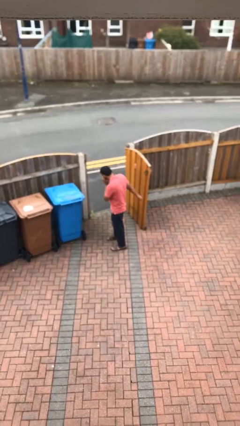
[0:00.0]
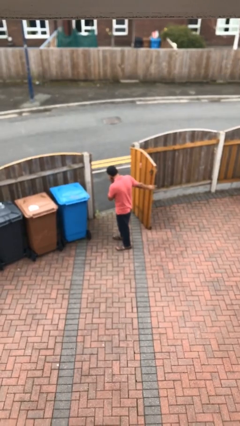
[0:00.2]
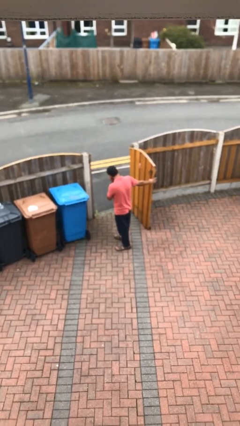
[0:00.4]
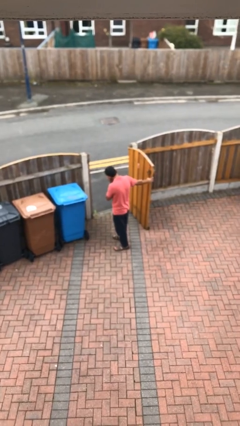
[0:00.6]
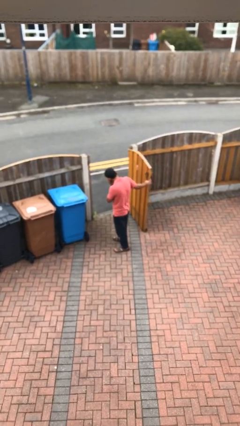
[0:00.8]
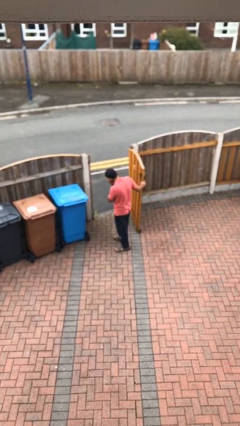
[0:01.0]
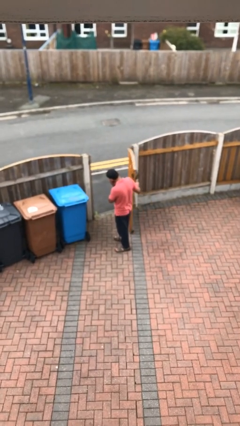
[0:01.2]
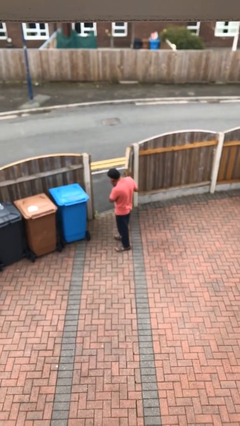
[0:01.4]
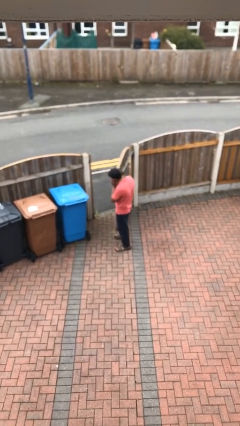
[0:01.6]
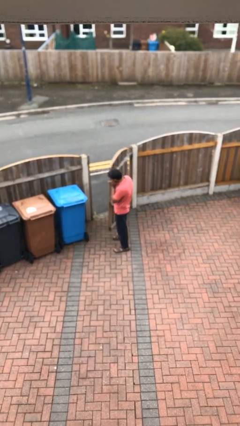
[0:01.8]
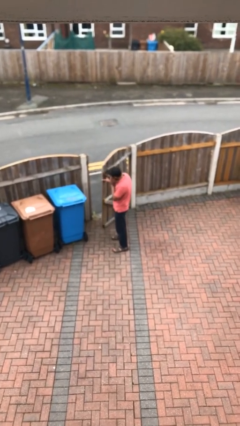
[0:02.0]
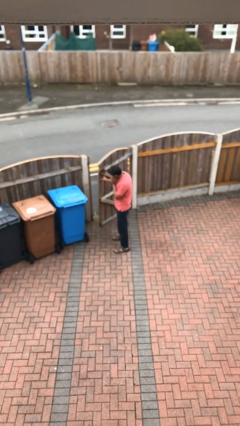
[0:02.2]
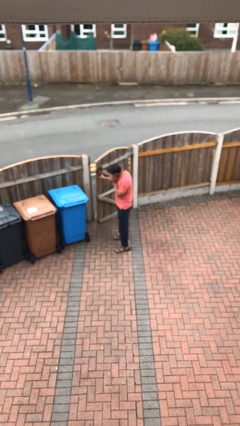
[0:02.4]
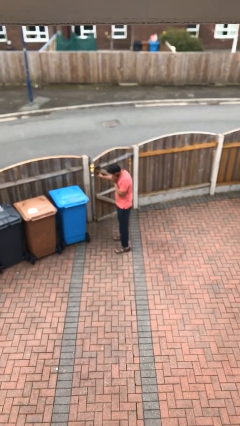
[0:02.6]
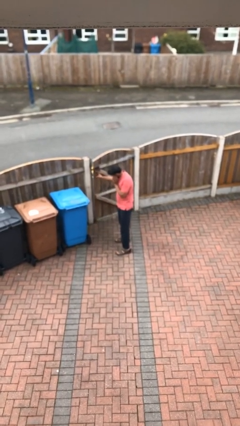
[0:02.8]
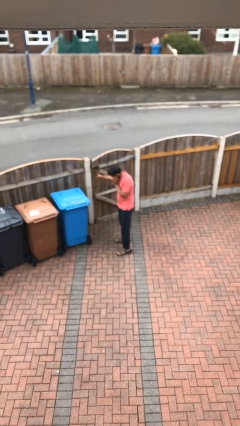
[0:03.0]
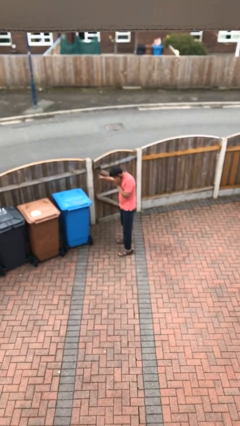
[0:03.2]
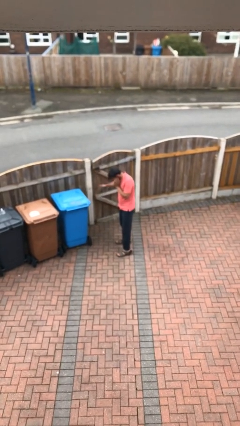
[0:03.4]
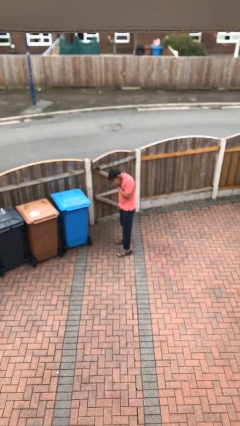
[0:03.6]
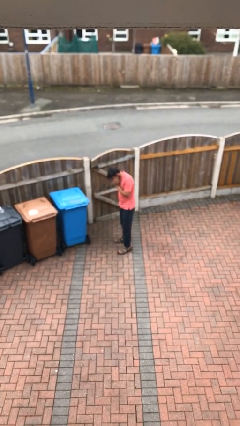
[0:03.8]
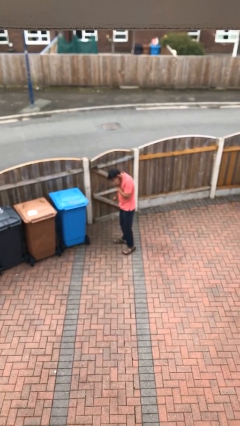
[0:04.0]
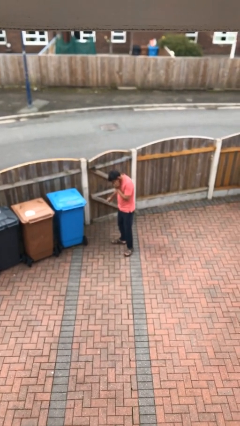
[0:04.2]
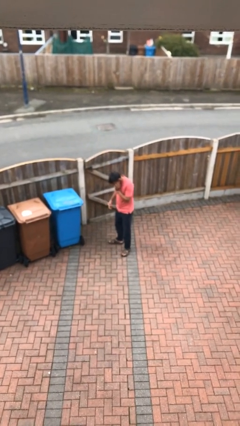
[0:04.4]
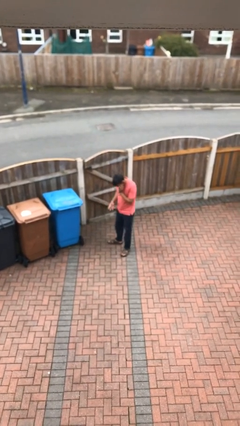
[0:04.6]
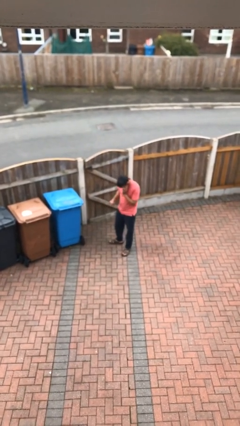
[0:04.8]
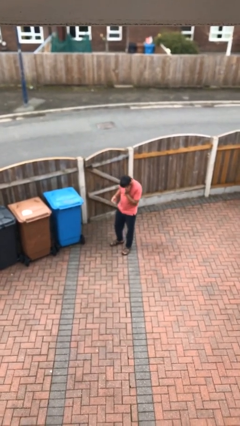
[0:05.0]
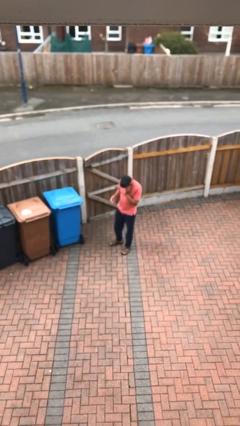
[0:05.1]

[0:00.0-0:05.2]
person closes facility door

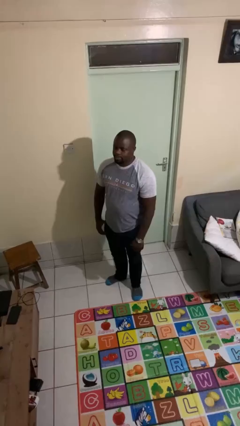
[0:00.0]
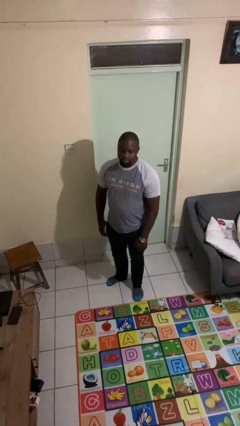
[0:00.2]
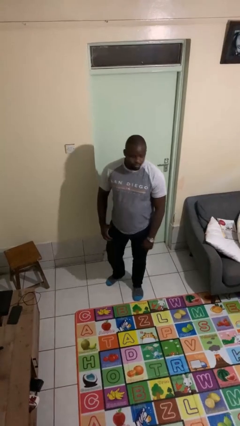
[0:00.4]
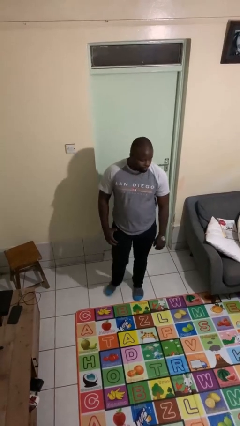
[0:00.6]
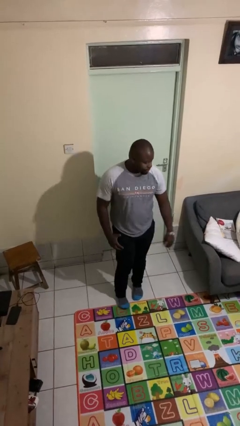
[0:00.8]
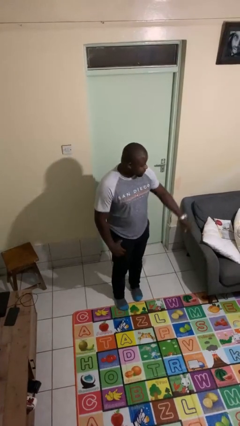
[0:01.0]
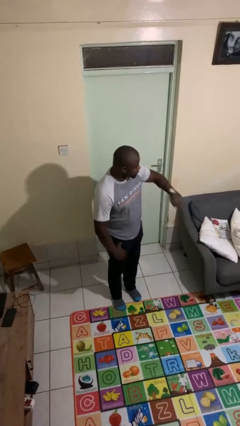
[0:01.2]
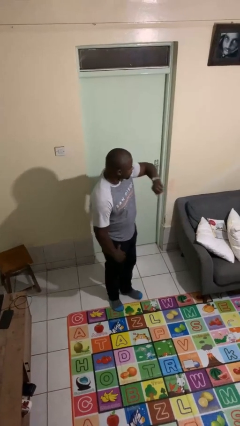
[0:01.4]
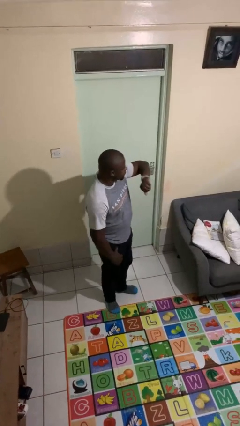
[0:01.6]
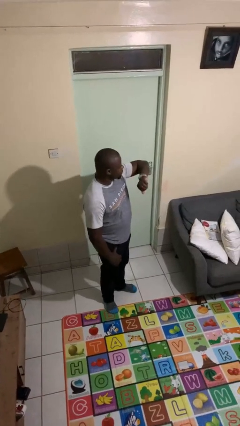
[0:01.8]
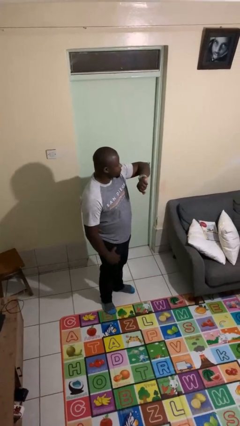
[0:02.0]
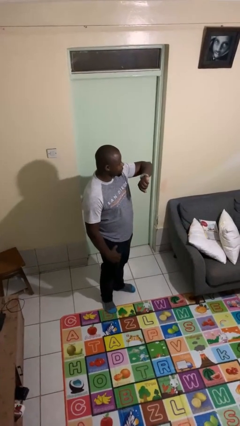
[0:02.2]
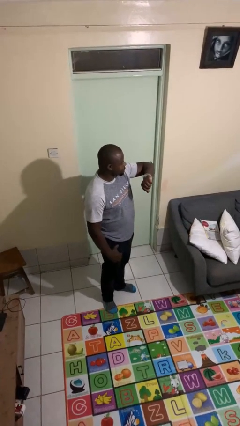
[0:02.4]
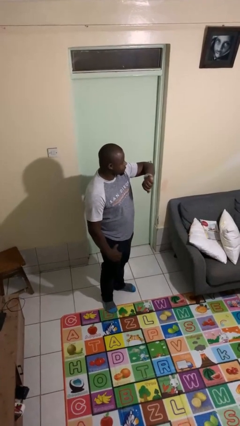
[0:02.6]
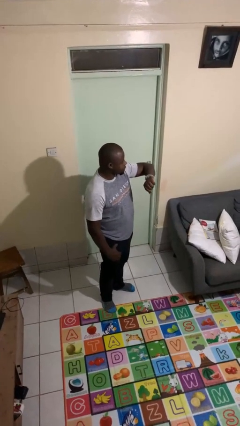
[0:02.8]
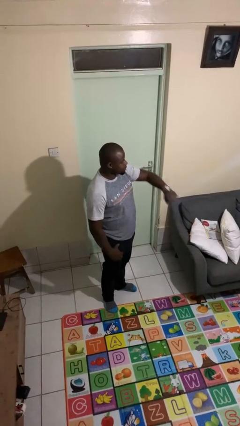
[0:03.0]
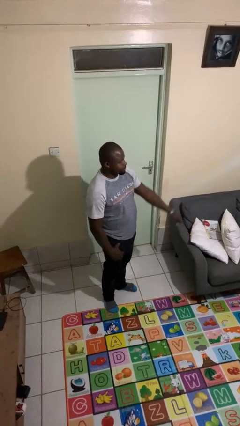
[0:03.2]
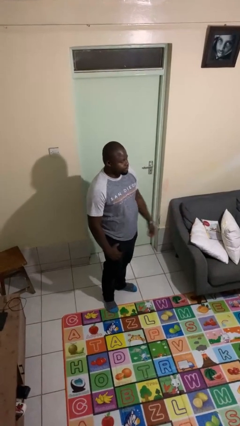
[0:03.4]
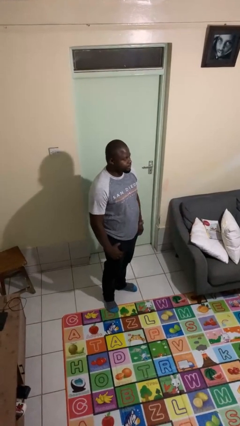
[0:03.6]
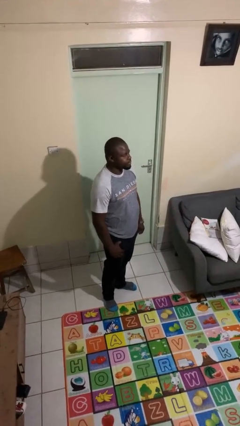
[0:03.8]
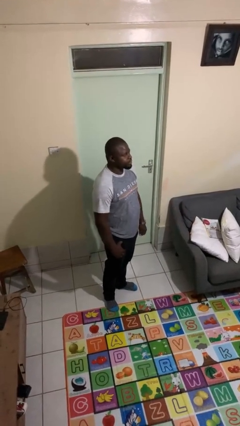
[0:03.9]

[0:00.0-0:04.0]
person looks at wristwatch

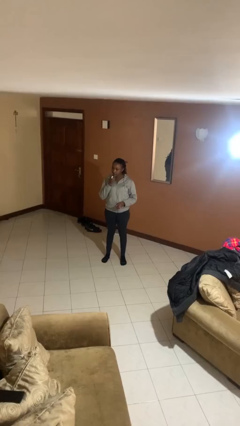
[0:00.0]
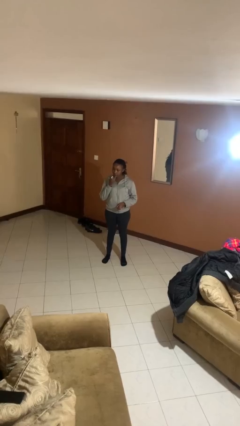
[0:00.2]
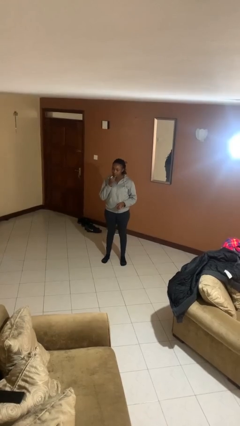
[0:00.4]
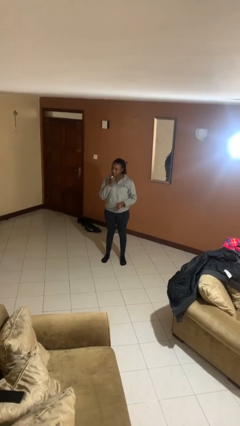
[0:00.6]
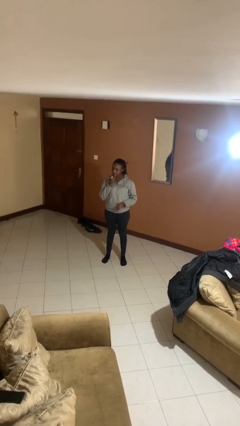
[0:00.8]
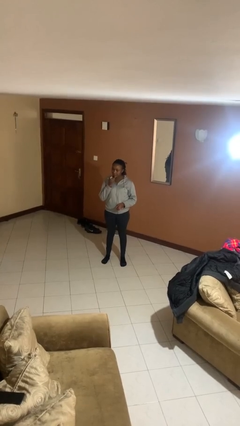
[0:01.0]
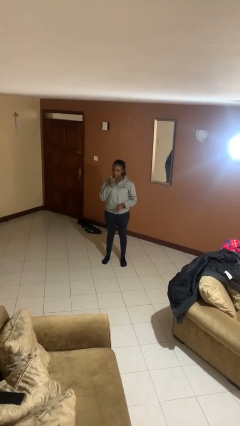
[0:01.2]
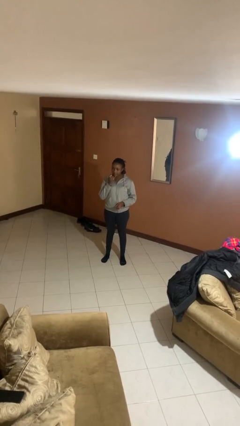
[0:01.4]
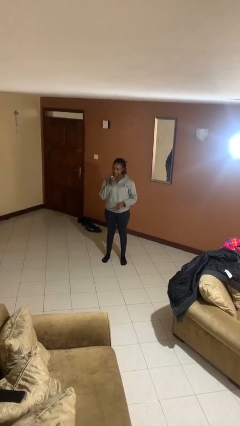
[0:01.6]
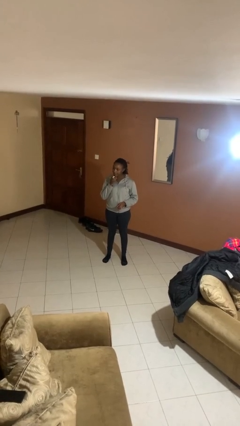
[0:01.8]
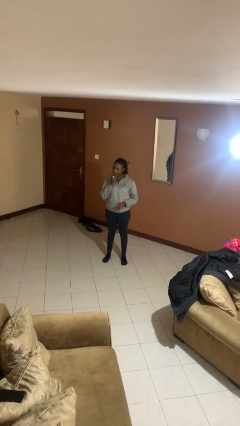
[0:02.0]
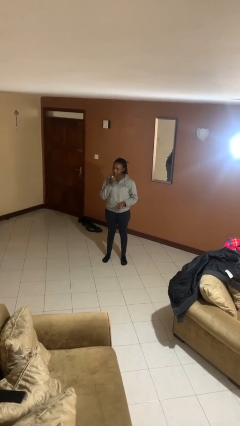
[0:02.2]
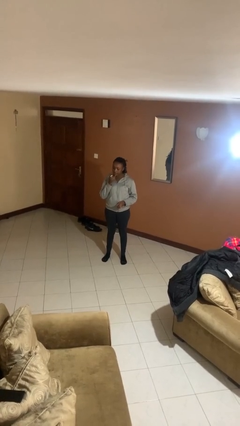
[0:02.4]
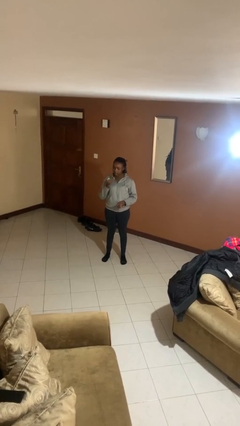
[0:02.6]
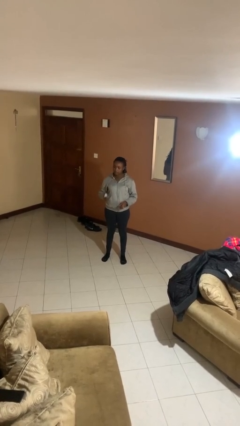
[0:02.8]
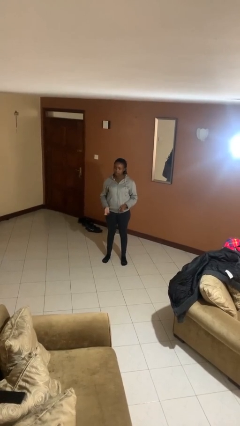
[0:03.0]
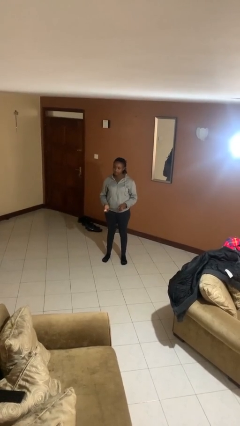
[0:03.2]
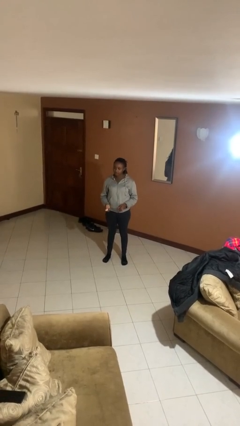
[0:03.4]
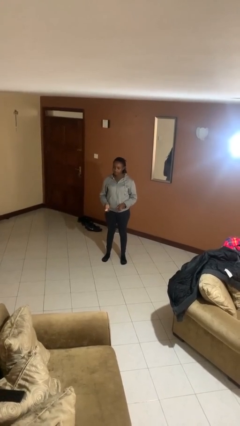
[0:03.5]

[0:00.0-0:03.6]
person applies lip makeup

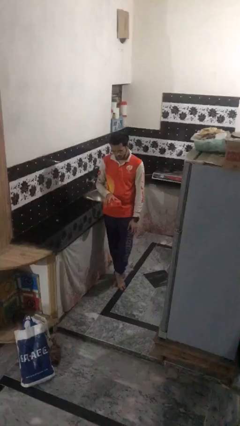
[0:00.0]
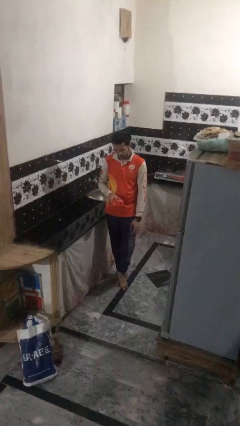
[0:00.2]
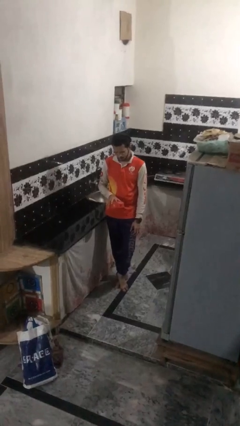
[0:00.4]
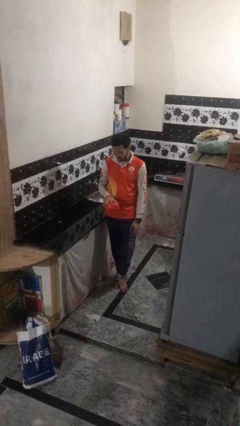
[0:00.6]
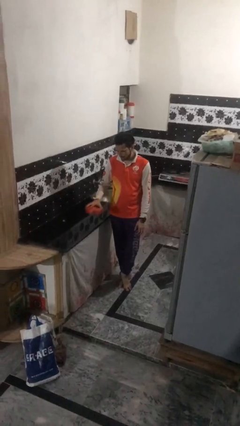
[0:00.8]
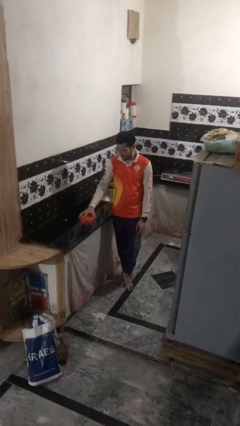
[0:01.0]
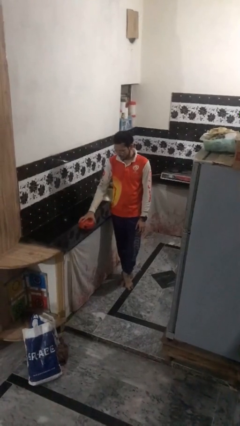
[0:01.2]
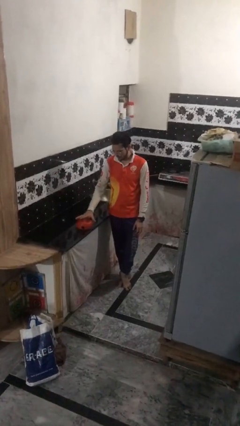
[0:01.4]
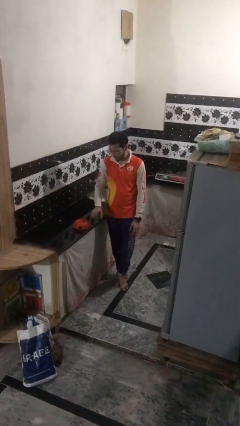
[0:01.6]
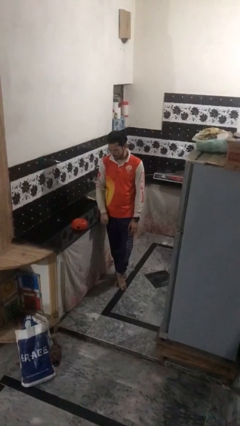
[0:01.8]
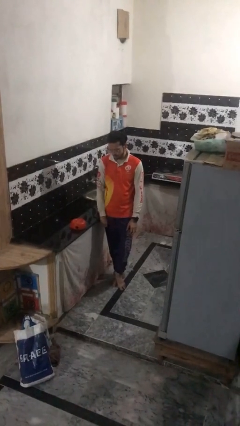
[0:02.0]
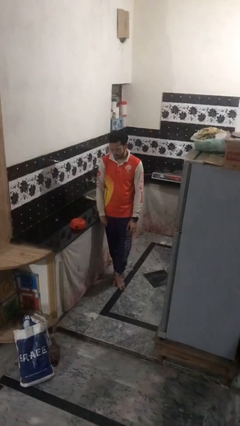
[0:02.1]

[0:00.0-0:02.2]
person puts down object on countertop

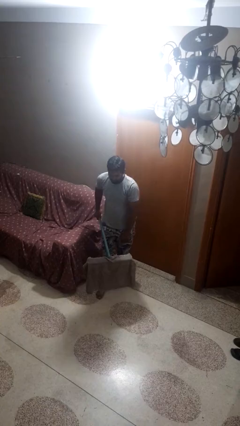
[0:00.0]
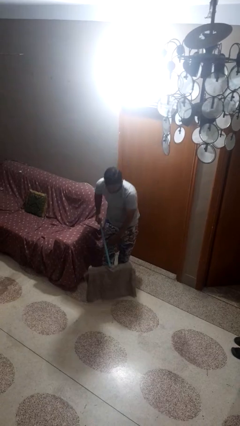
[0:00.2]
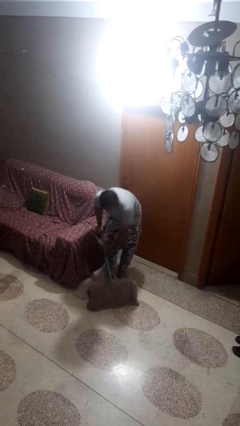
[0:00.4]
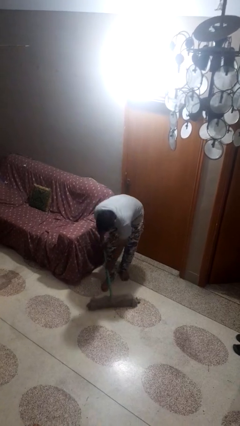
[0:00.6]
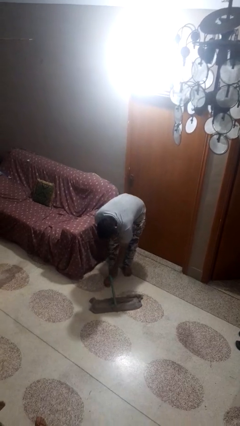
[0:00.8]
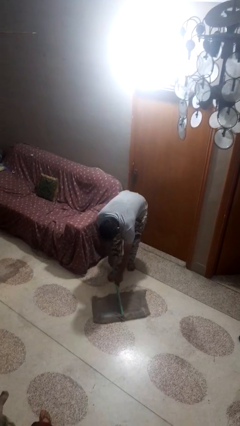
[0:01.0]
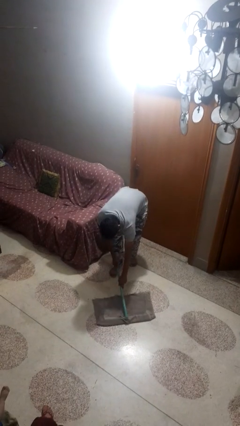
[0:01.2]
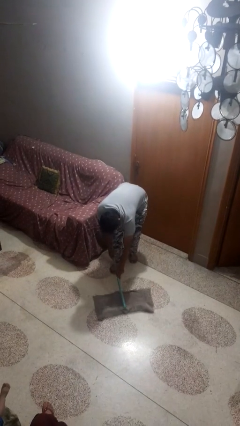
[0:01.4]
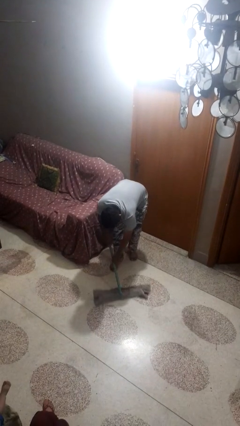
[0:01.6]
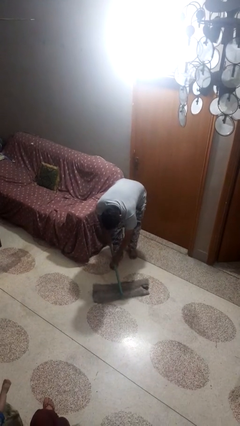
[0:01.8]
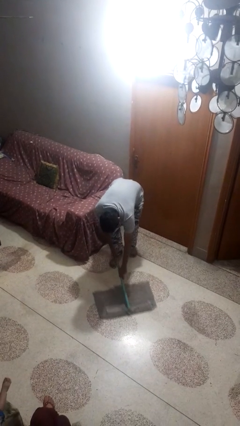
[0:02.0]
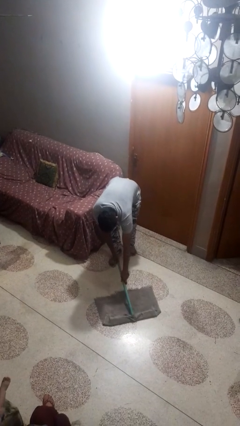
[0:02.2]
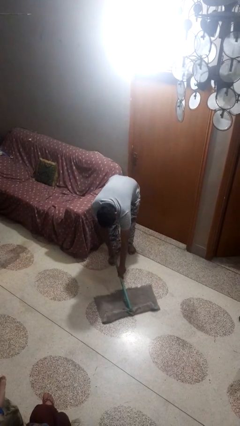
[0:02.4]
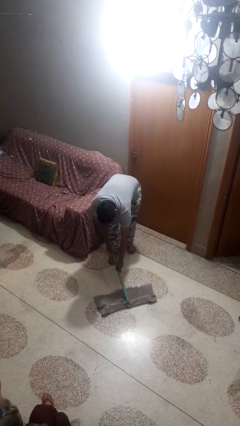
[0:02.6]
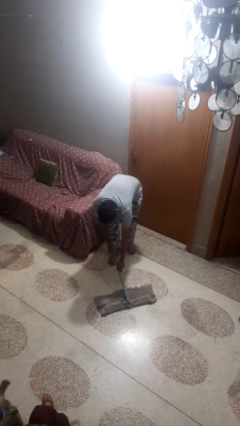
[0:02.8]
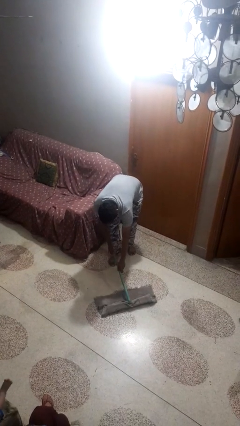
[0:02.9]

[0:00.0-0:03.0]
person mops

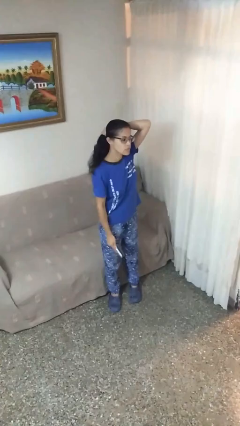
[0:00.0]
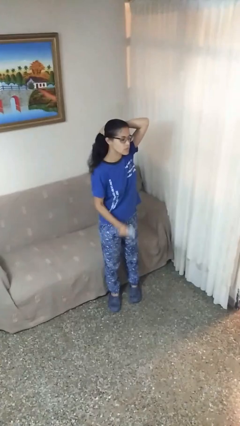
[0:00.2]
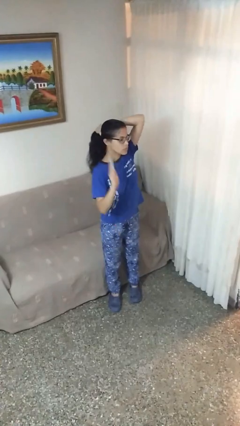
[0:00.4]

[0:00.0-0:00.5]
person brushes hair
